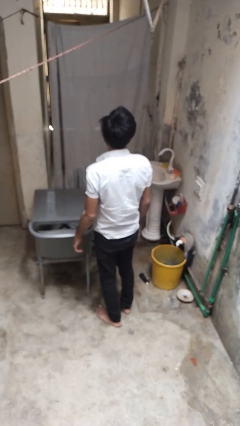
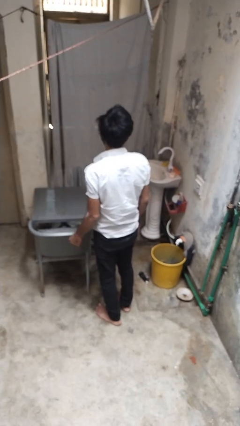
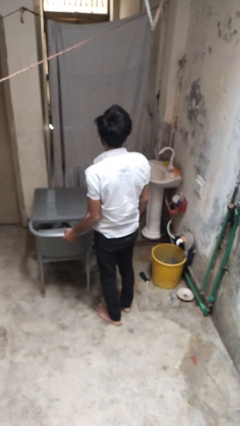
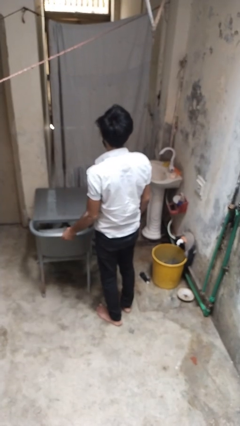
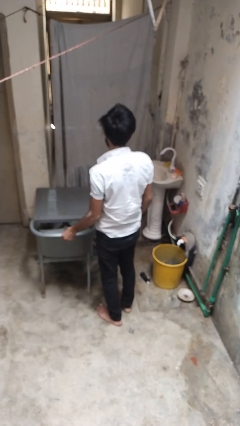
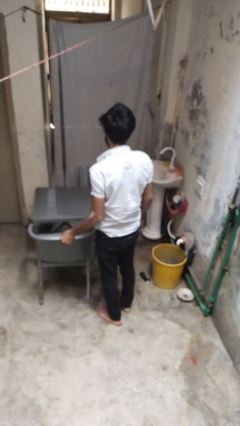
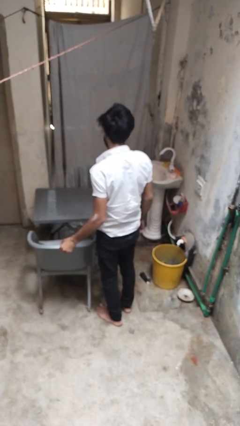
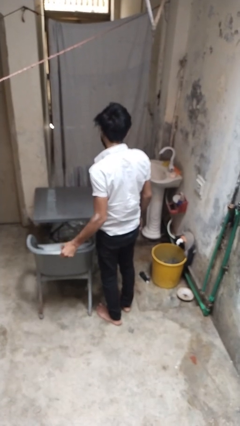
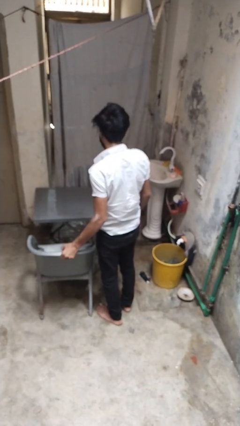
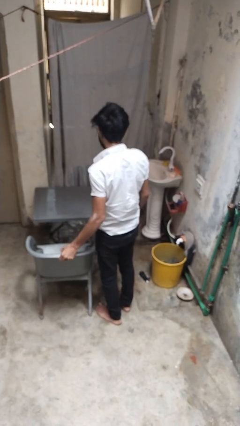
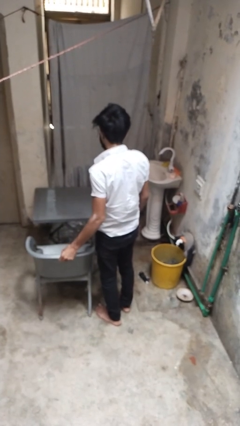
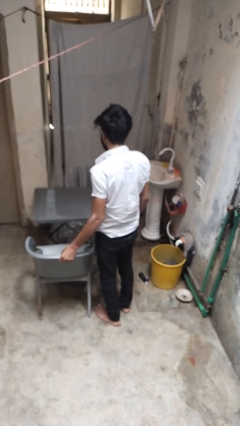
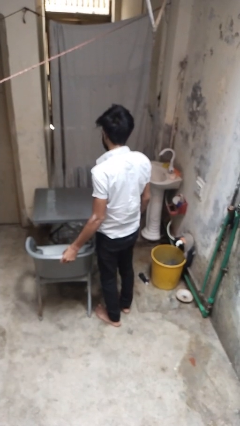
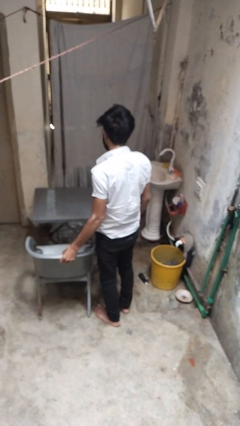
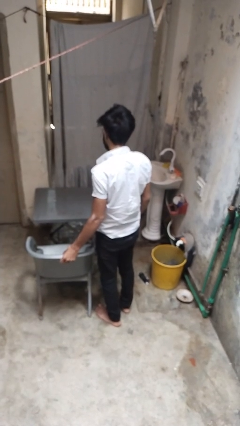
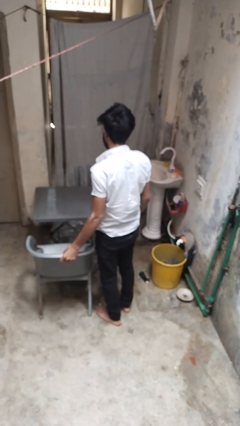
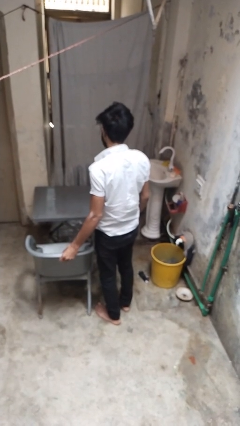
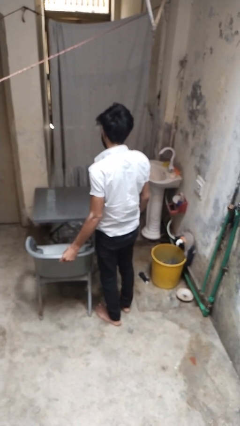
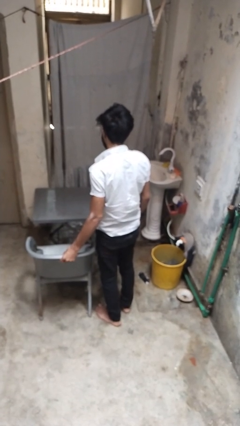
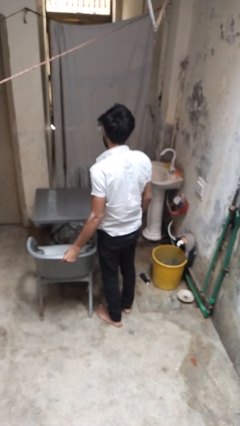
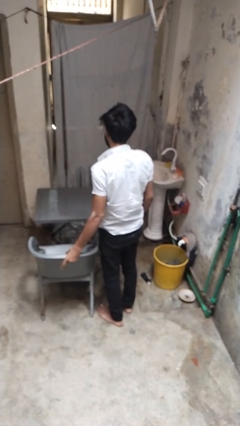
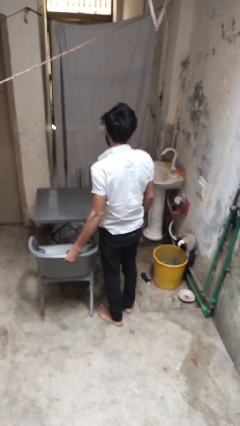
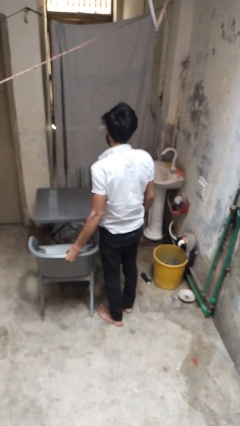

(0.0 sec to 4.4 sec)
person pulls out chair

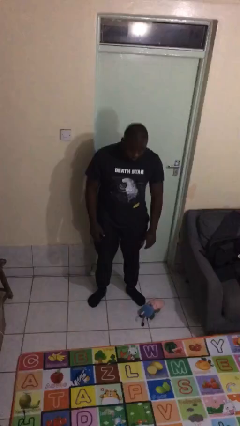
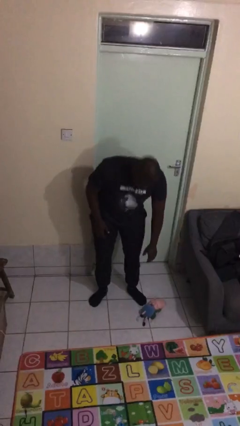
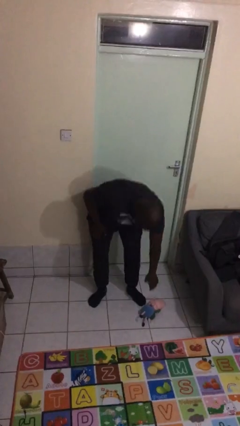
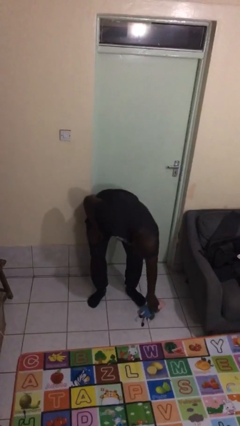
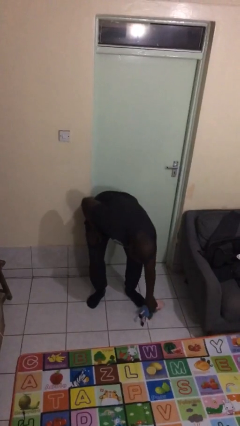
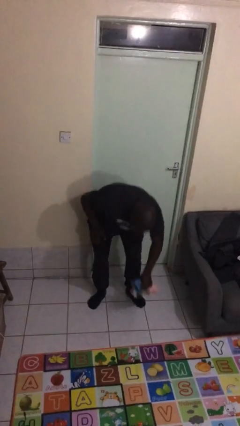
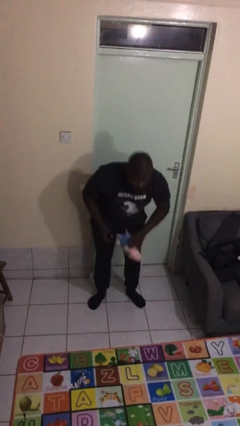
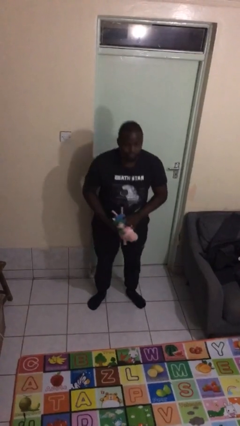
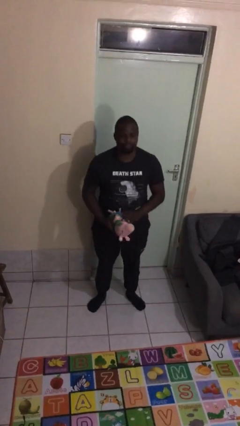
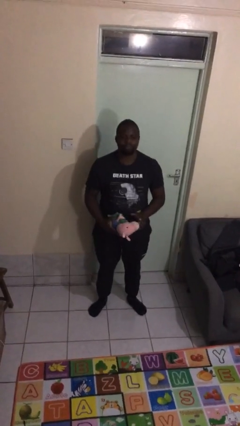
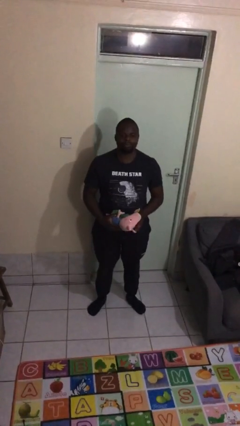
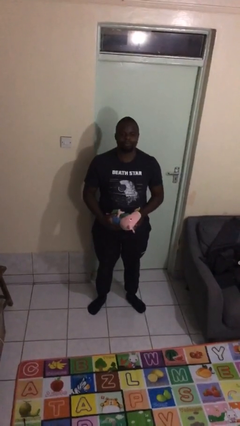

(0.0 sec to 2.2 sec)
person picks up object from floor

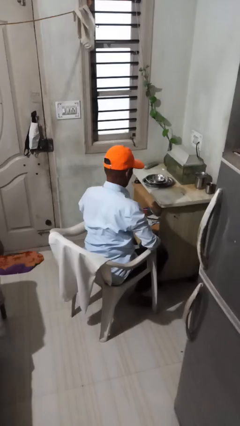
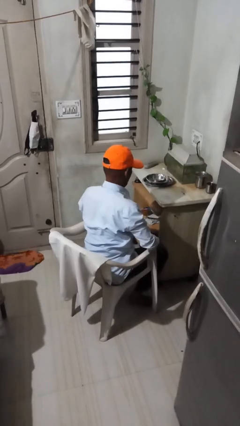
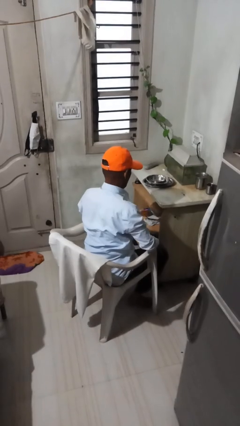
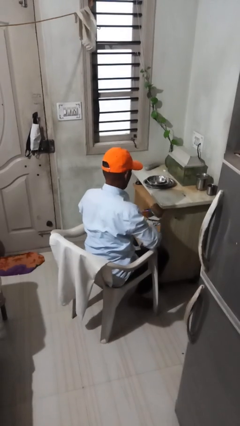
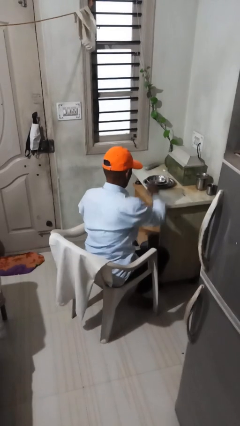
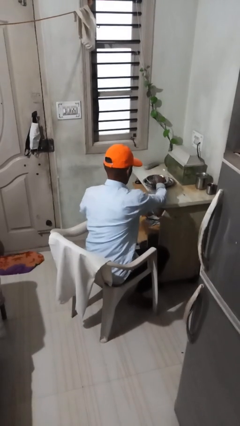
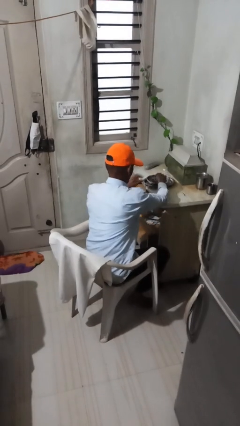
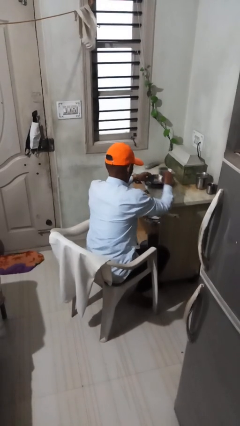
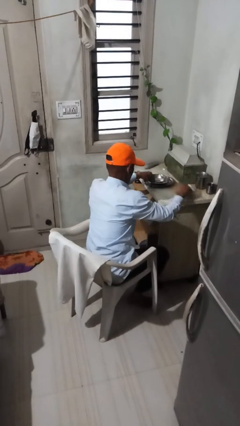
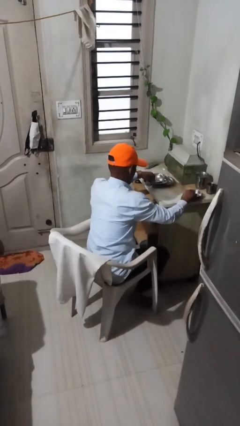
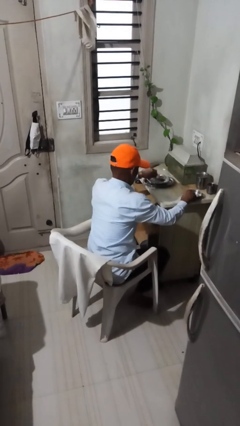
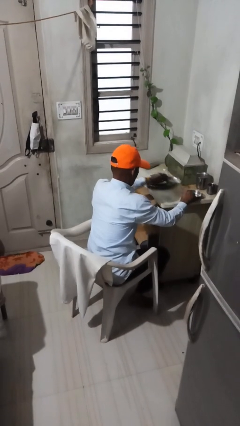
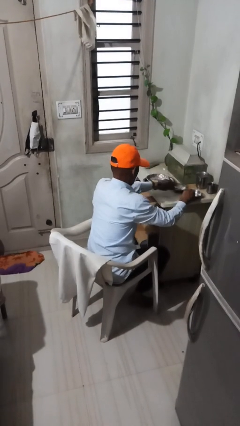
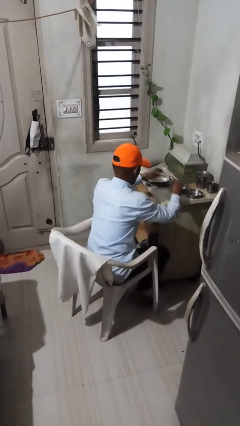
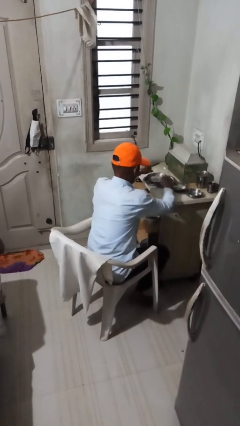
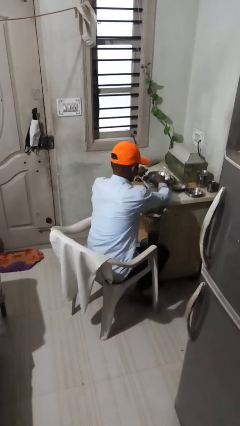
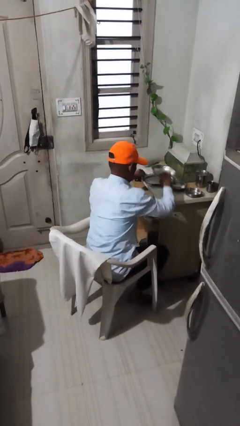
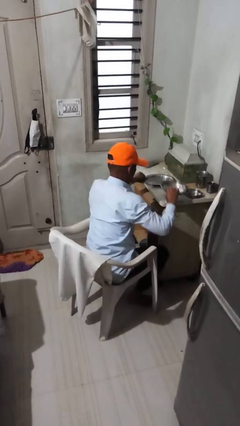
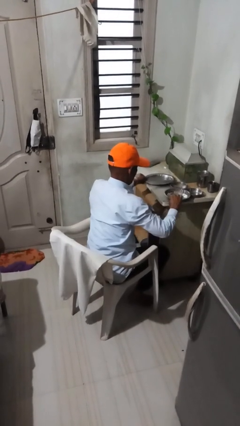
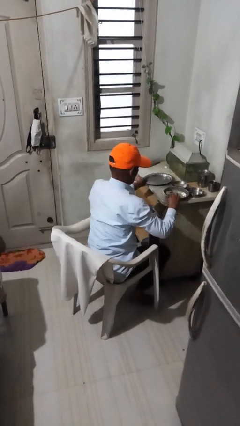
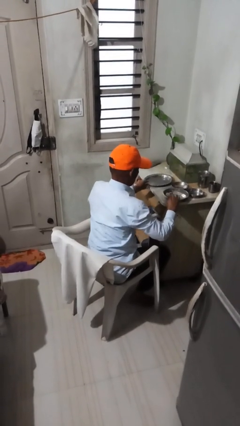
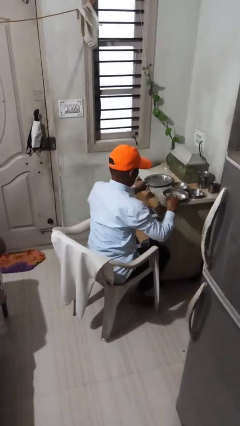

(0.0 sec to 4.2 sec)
person sets table

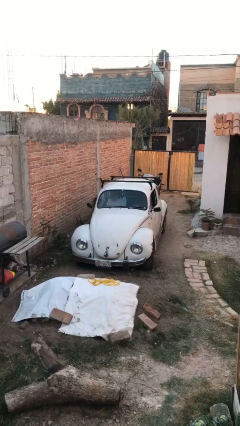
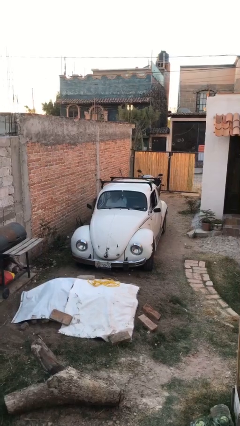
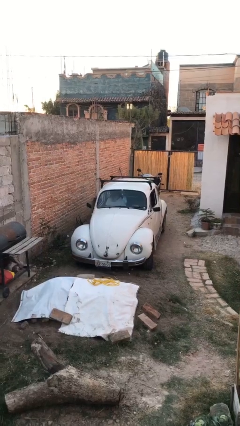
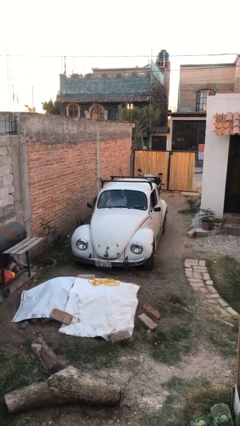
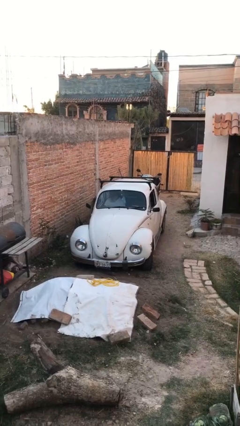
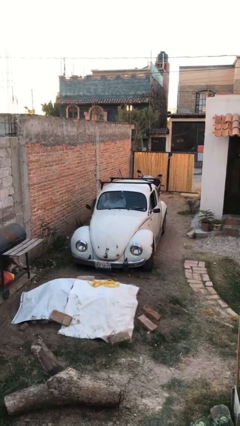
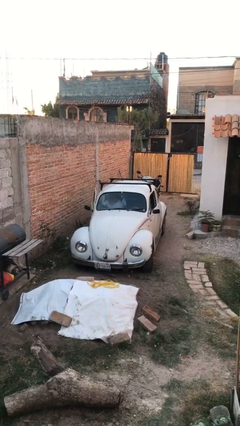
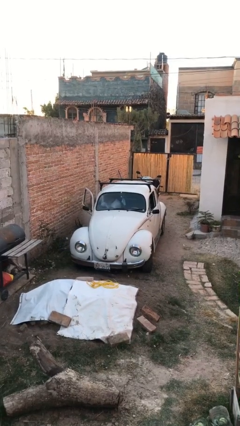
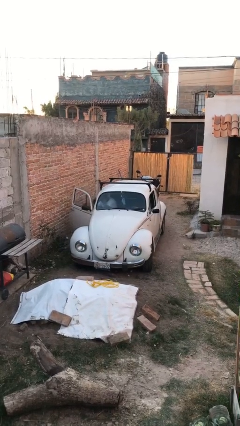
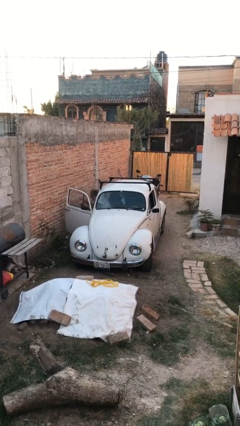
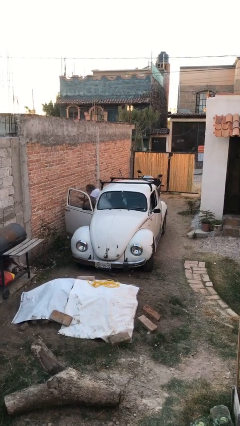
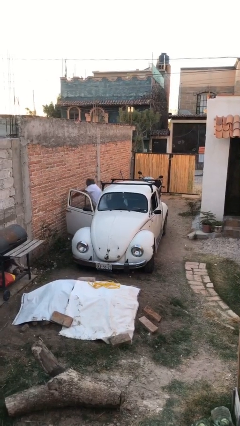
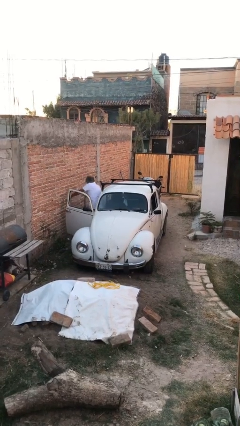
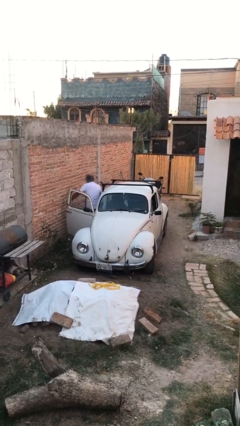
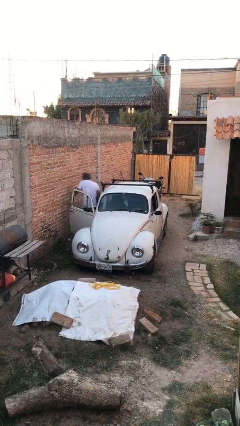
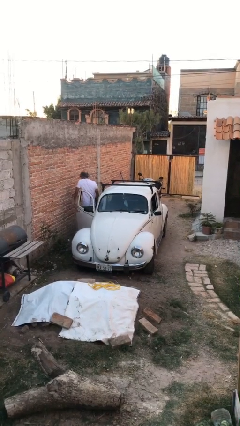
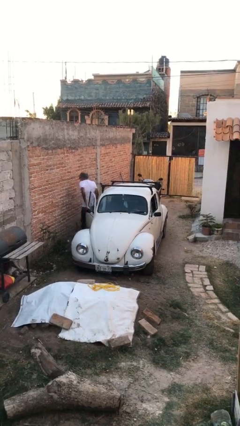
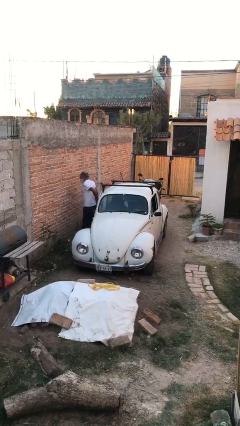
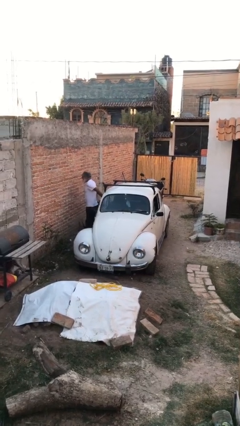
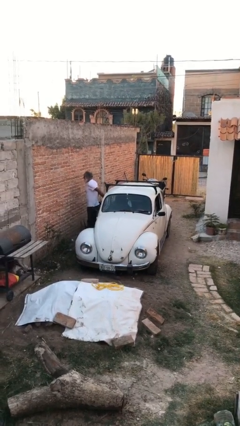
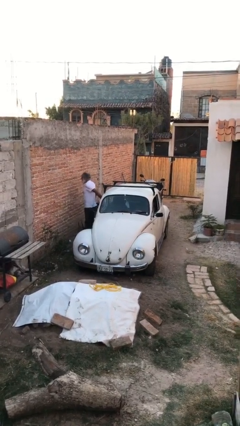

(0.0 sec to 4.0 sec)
car drops off person

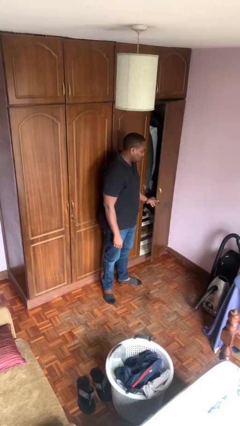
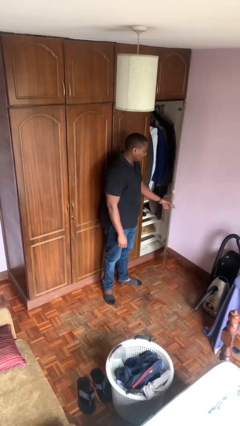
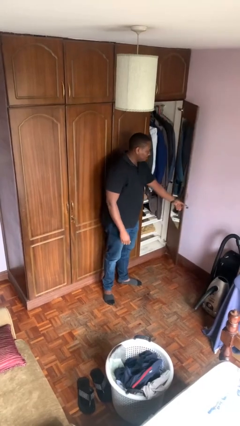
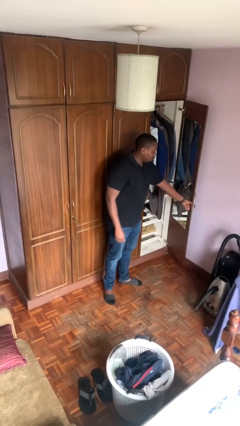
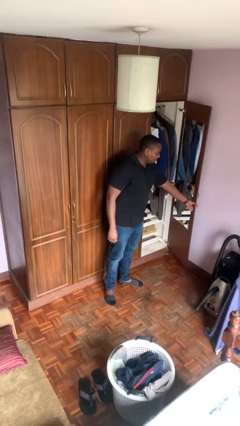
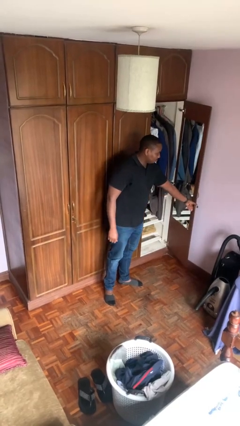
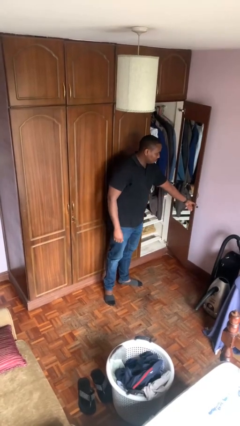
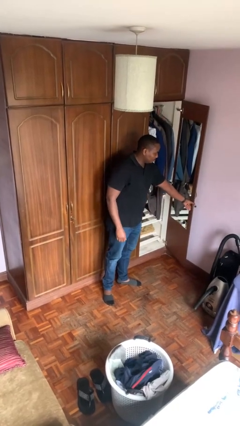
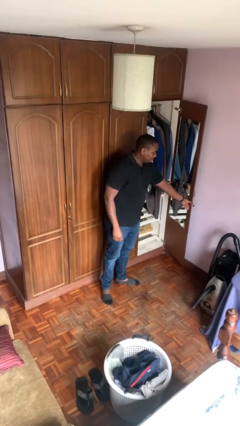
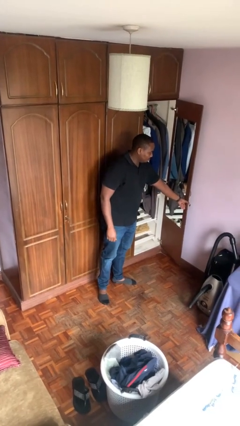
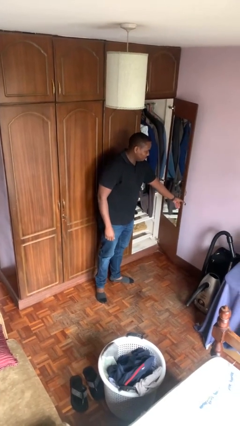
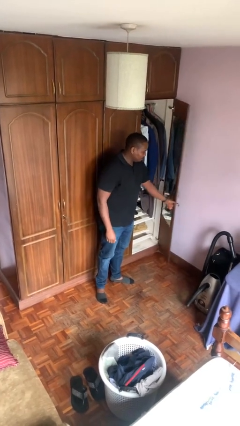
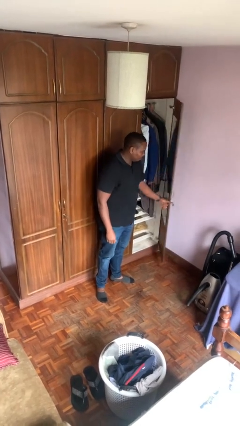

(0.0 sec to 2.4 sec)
person opens closet door

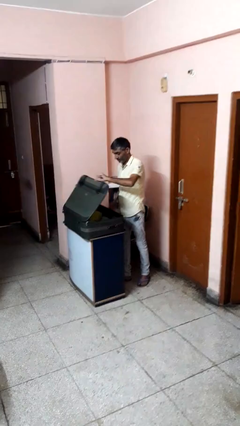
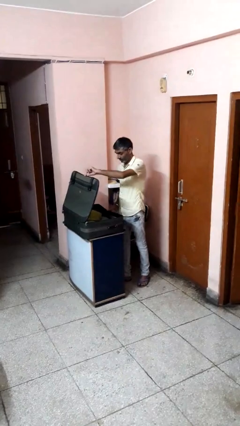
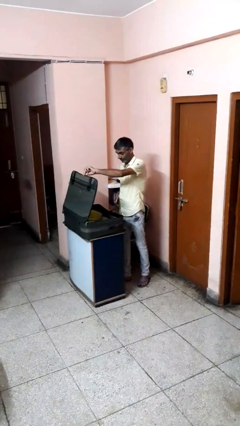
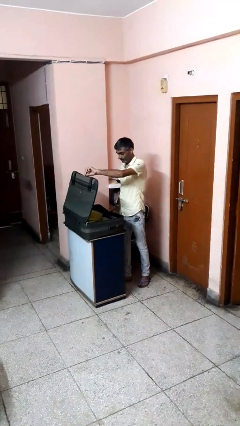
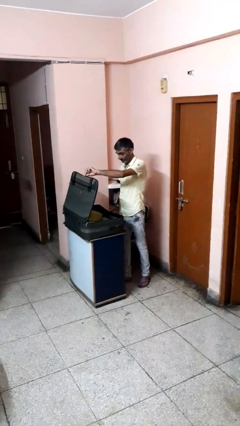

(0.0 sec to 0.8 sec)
person opens suitcase
